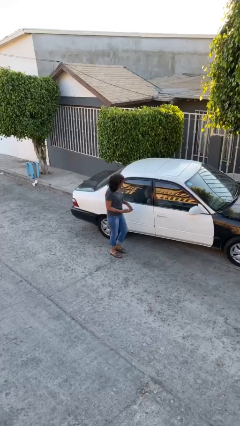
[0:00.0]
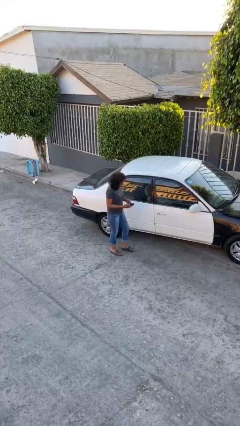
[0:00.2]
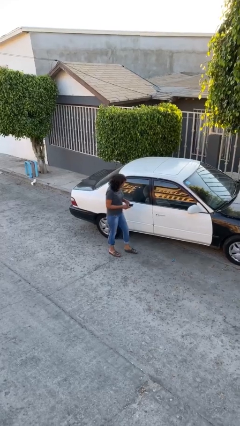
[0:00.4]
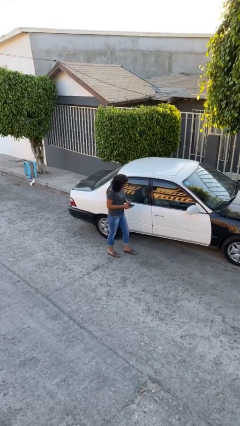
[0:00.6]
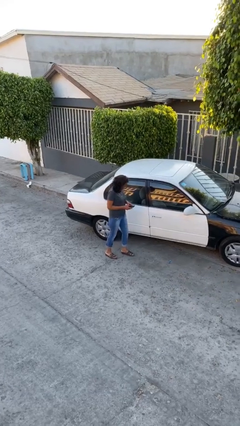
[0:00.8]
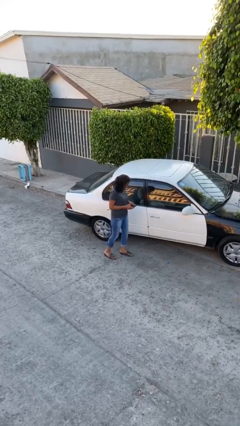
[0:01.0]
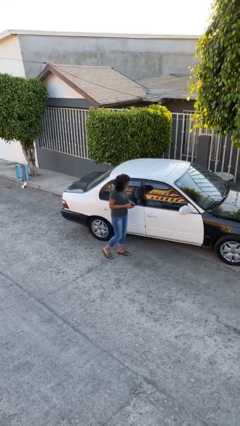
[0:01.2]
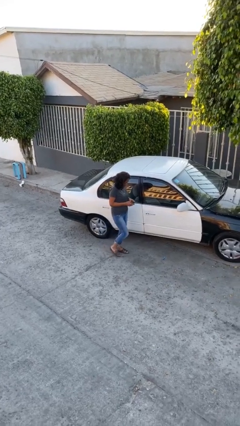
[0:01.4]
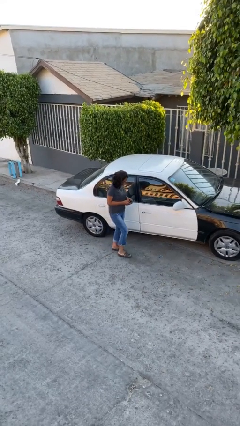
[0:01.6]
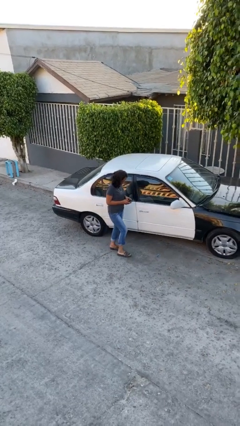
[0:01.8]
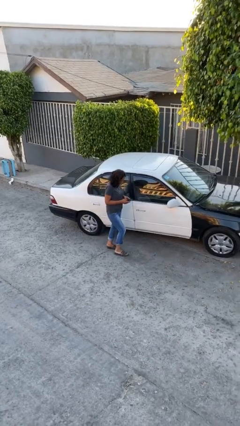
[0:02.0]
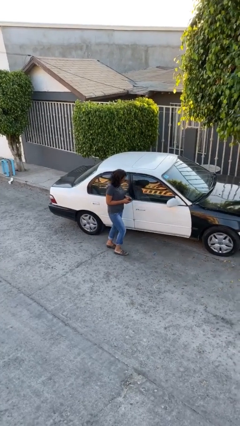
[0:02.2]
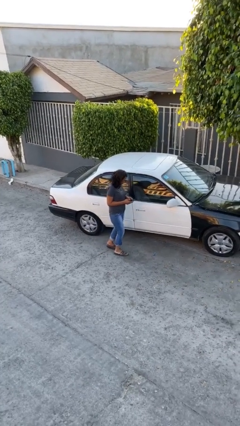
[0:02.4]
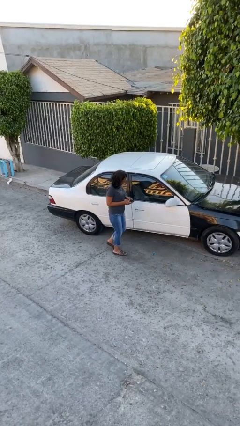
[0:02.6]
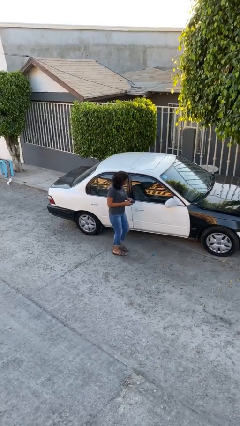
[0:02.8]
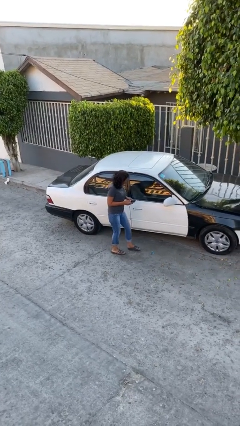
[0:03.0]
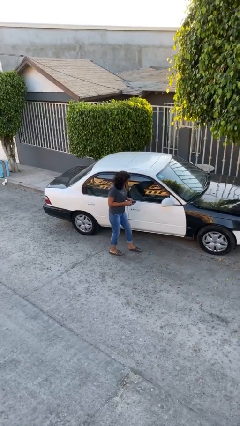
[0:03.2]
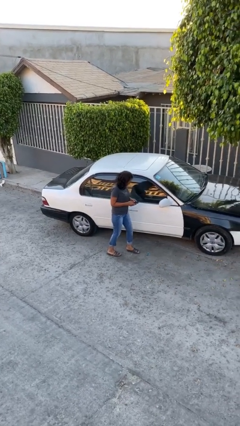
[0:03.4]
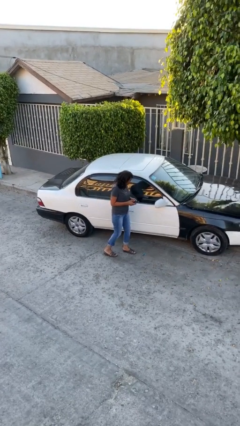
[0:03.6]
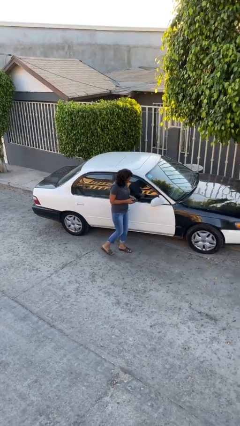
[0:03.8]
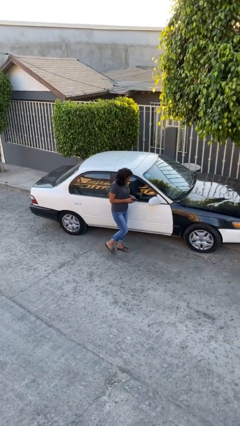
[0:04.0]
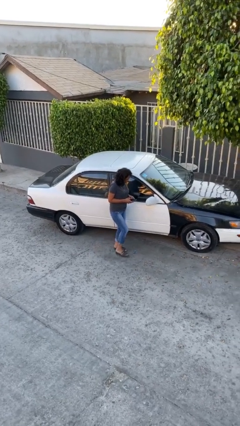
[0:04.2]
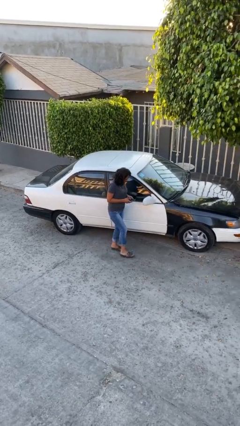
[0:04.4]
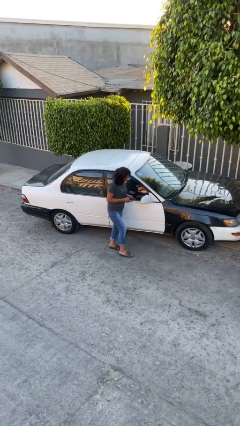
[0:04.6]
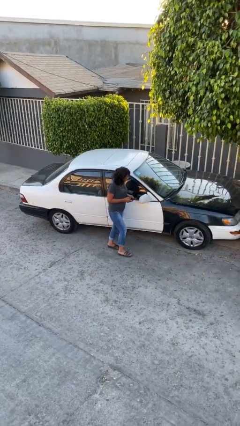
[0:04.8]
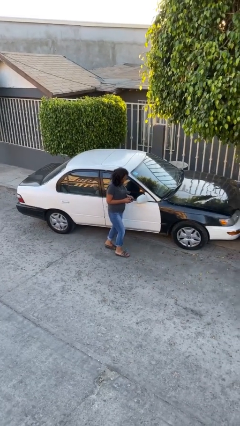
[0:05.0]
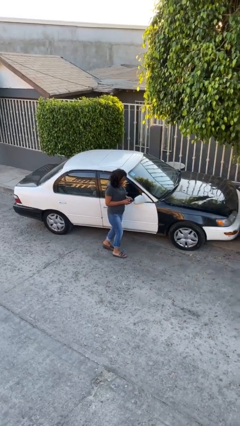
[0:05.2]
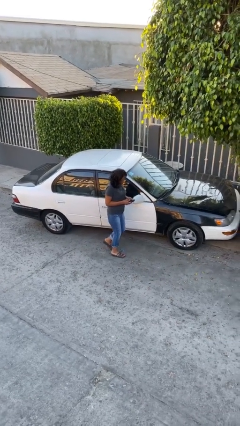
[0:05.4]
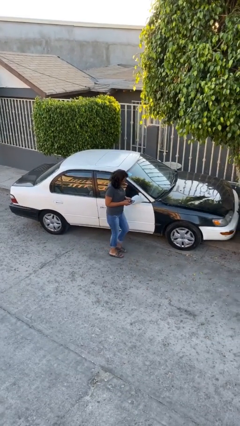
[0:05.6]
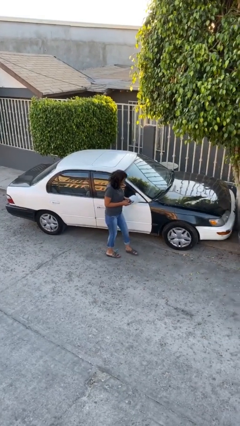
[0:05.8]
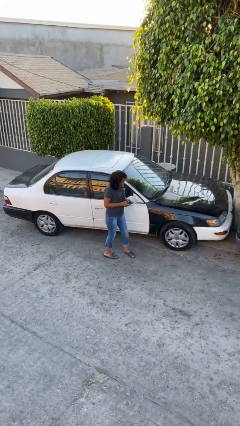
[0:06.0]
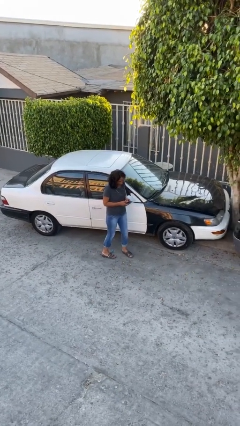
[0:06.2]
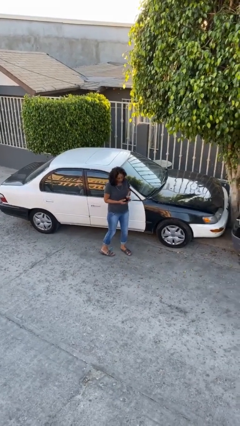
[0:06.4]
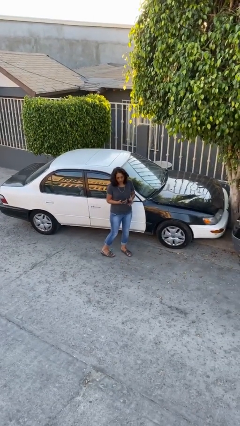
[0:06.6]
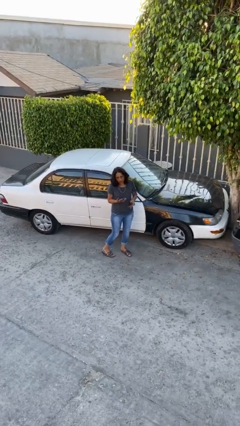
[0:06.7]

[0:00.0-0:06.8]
person texts on phone

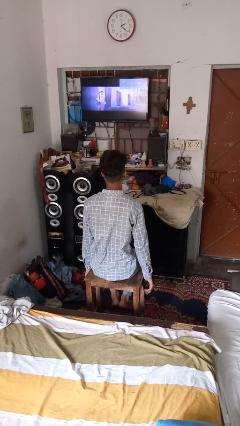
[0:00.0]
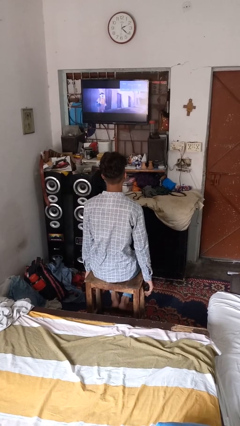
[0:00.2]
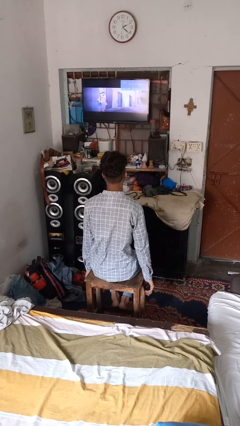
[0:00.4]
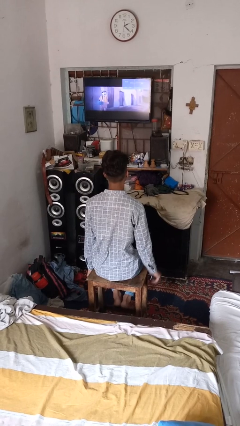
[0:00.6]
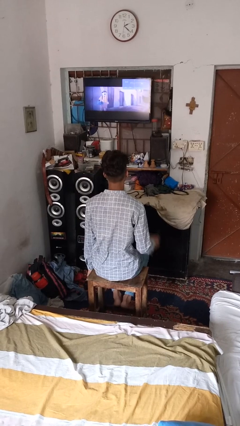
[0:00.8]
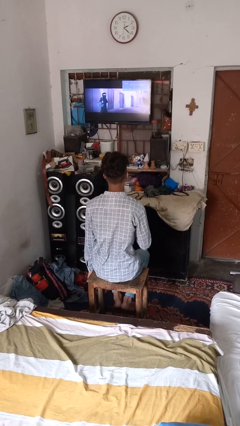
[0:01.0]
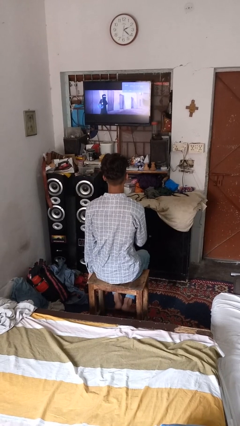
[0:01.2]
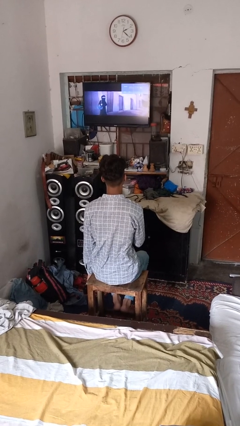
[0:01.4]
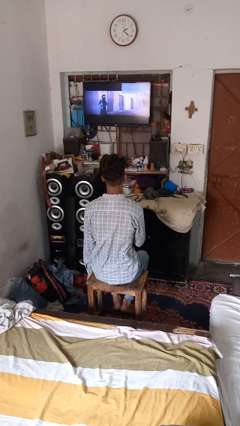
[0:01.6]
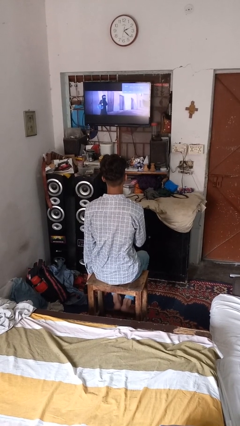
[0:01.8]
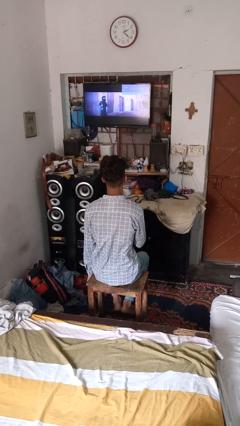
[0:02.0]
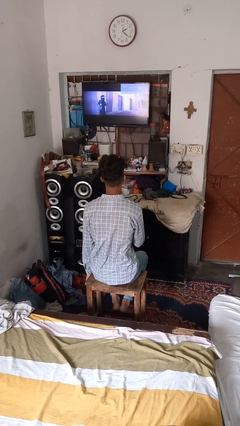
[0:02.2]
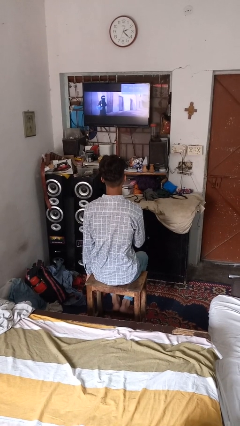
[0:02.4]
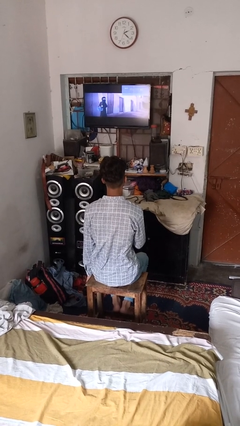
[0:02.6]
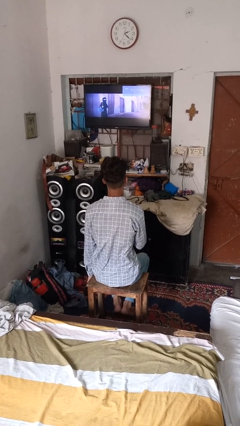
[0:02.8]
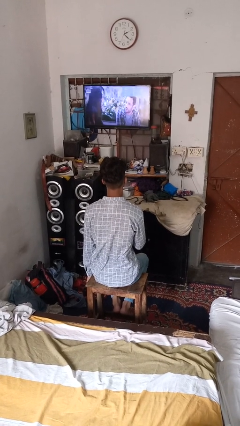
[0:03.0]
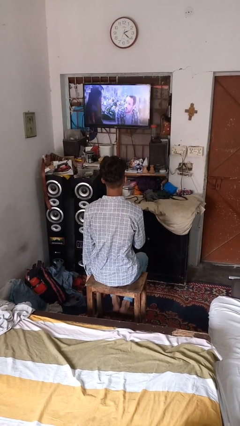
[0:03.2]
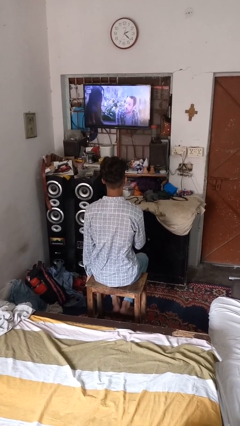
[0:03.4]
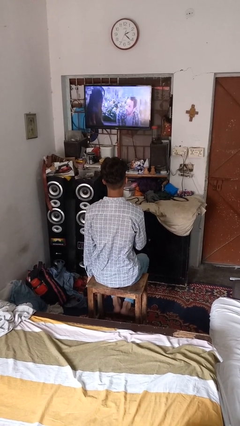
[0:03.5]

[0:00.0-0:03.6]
person uses television remote

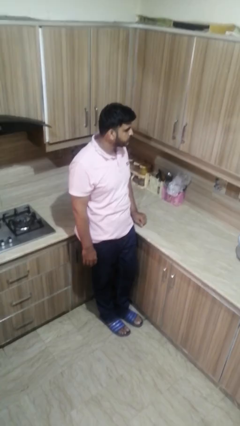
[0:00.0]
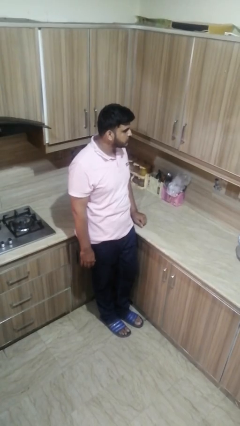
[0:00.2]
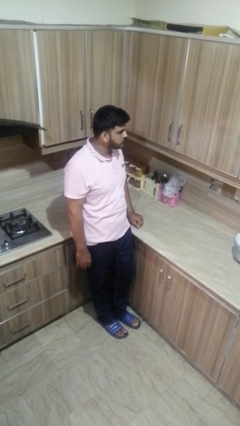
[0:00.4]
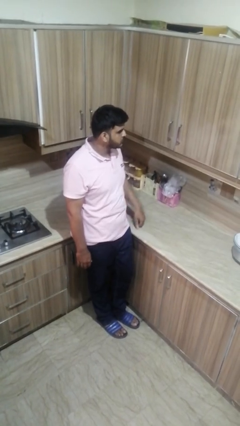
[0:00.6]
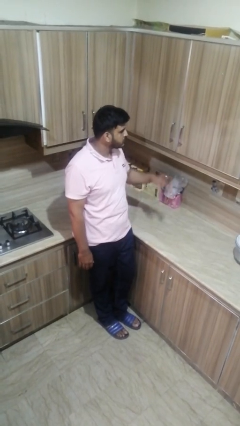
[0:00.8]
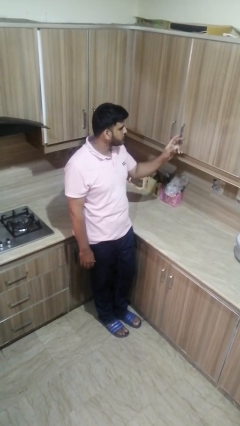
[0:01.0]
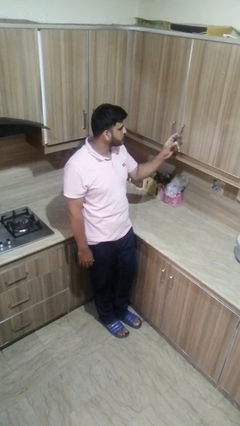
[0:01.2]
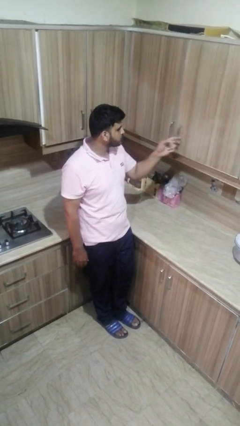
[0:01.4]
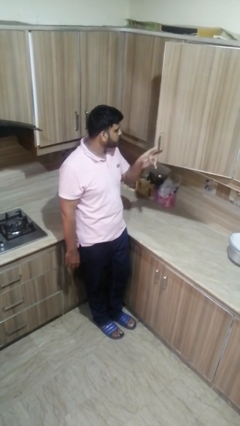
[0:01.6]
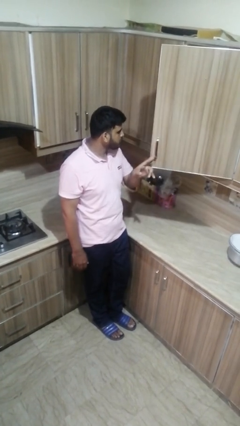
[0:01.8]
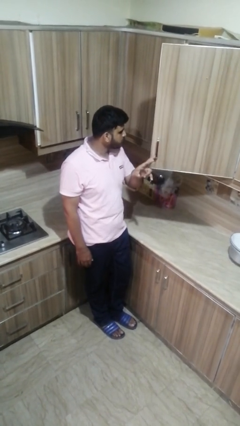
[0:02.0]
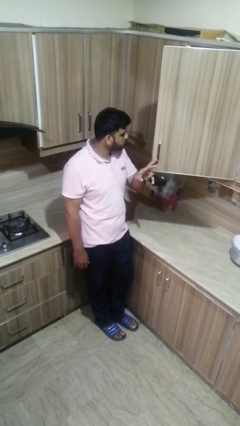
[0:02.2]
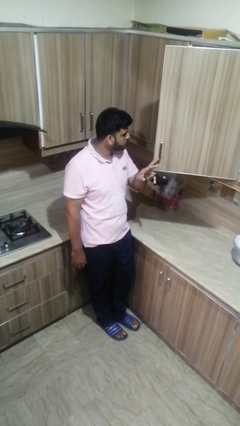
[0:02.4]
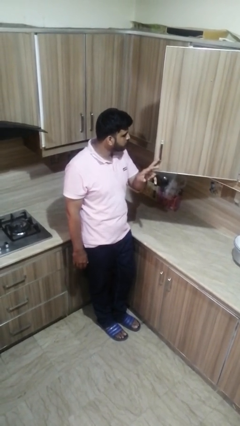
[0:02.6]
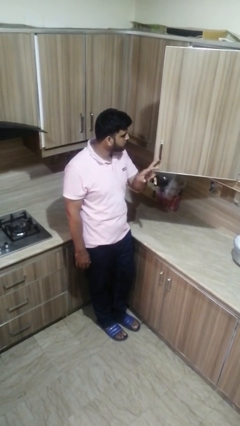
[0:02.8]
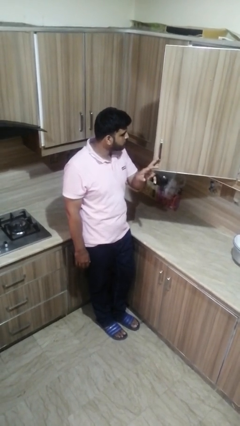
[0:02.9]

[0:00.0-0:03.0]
person opens cabinet

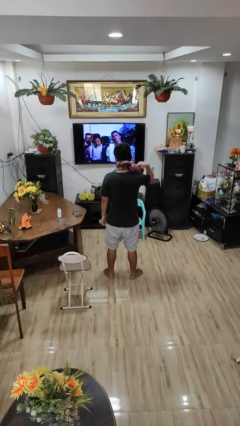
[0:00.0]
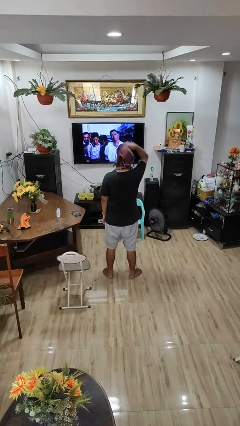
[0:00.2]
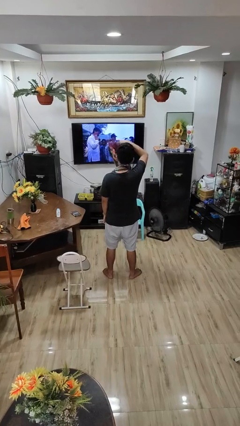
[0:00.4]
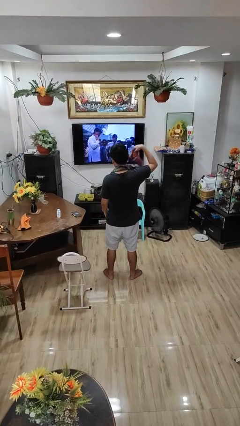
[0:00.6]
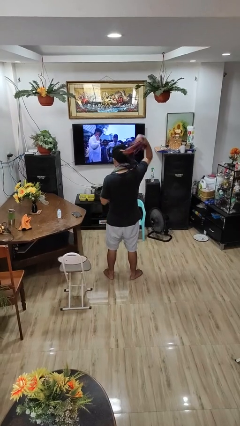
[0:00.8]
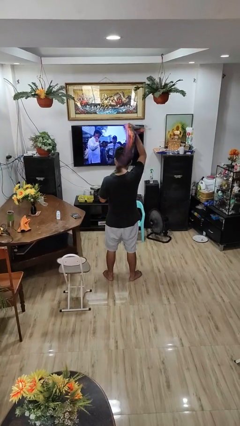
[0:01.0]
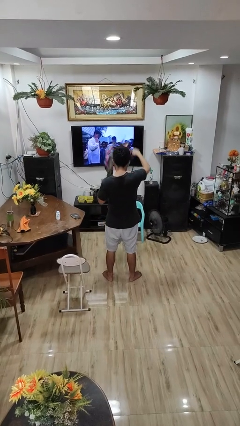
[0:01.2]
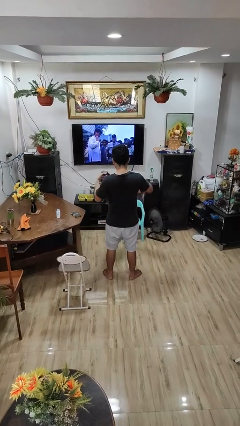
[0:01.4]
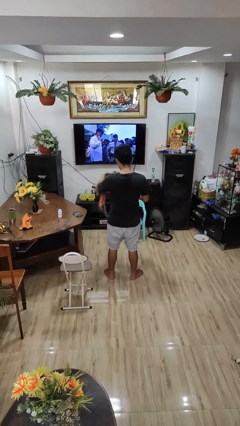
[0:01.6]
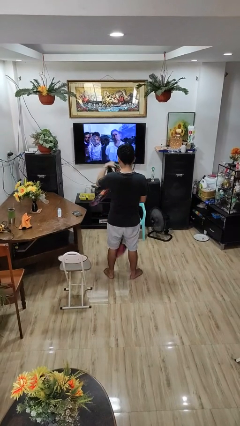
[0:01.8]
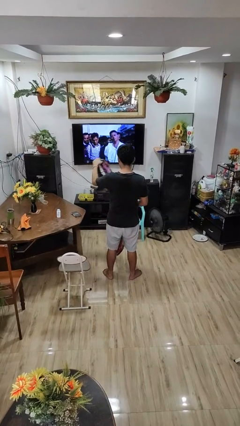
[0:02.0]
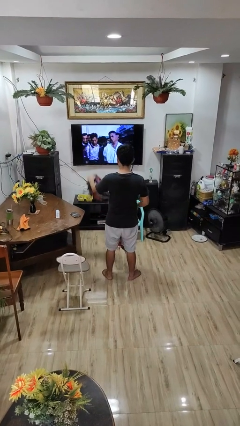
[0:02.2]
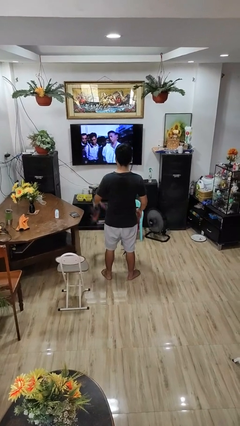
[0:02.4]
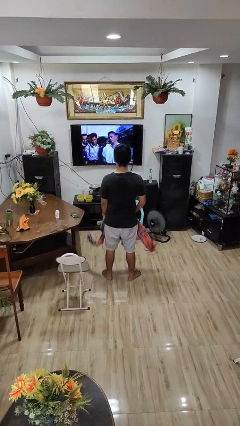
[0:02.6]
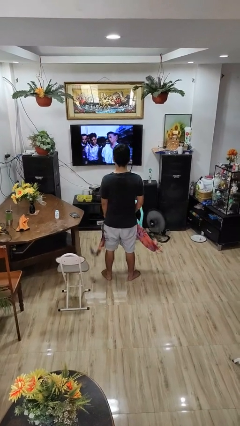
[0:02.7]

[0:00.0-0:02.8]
person takes off scarf

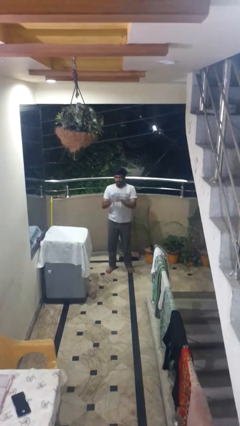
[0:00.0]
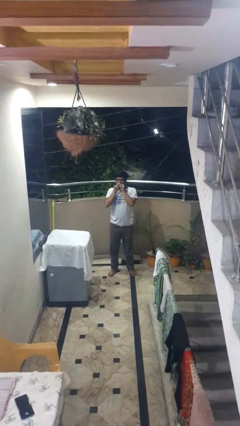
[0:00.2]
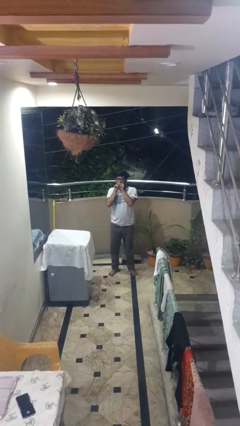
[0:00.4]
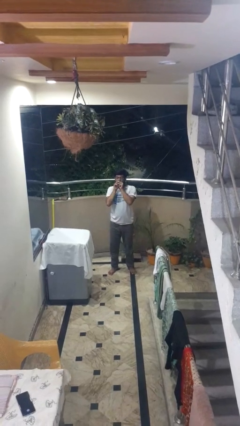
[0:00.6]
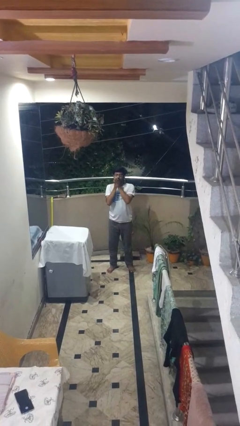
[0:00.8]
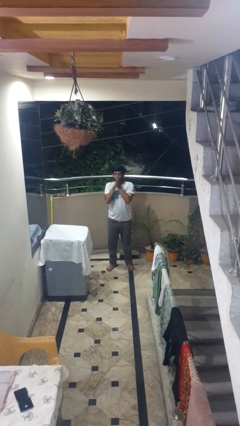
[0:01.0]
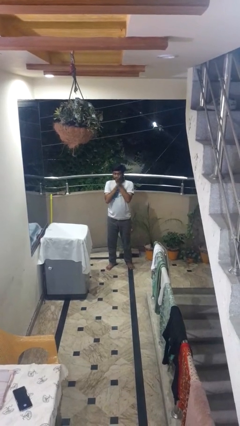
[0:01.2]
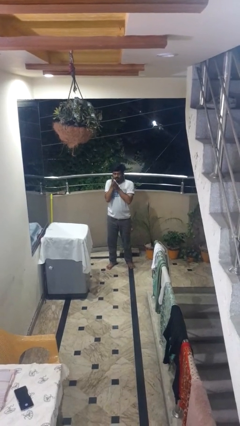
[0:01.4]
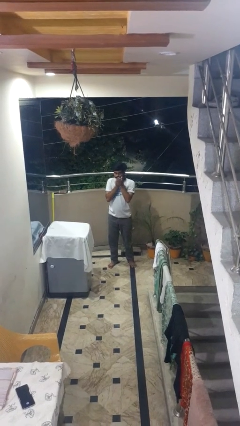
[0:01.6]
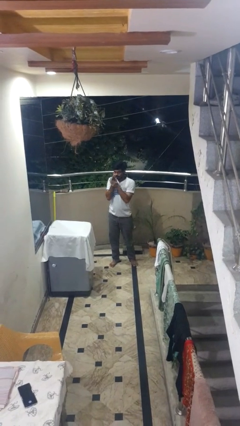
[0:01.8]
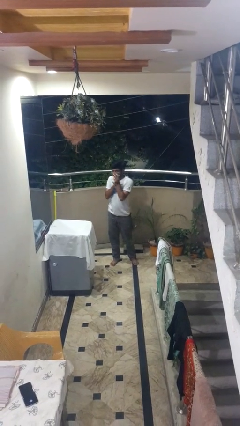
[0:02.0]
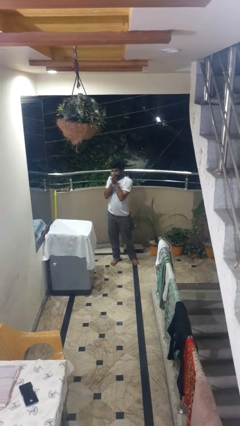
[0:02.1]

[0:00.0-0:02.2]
person blows into hands
